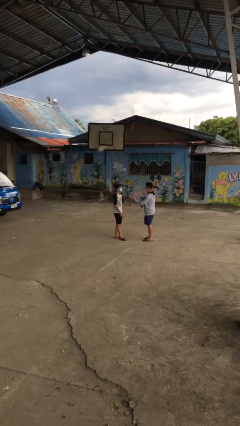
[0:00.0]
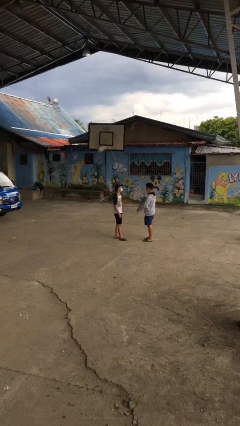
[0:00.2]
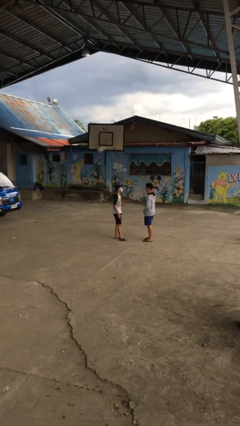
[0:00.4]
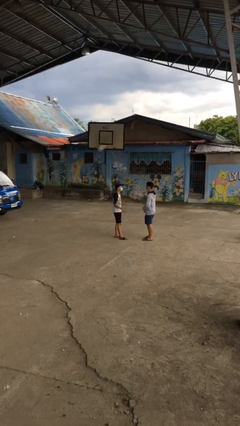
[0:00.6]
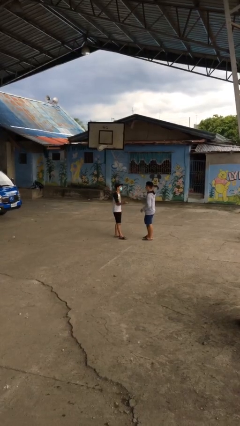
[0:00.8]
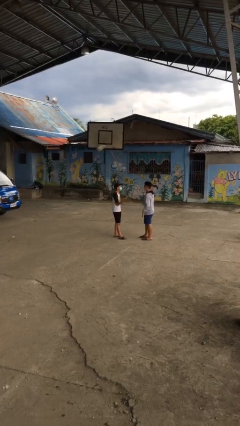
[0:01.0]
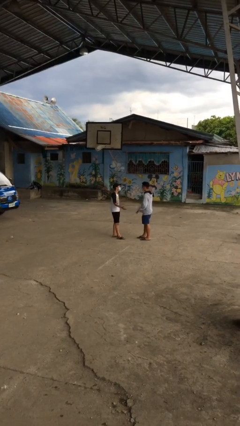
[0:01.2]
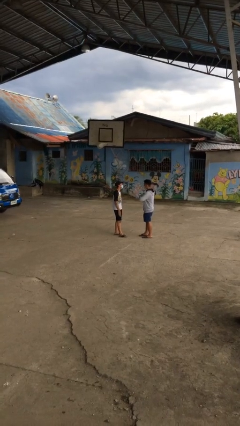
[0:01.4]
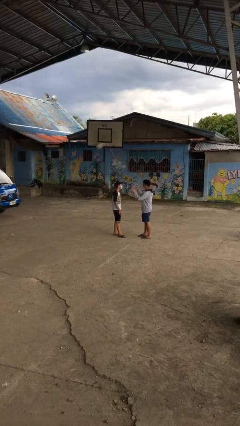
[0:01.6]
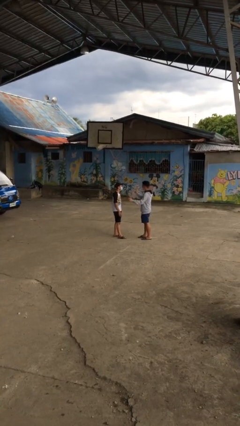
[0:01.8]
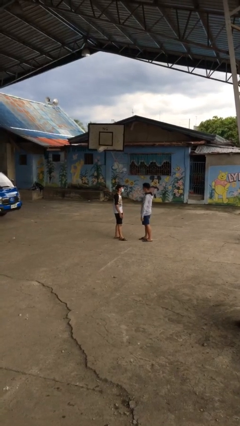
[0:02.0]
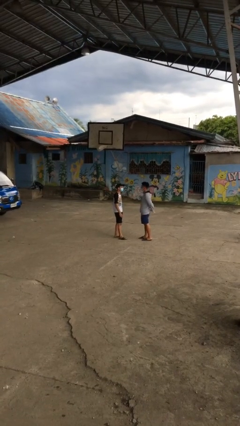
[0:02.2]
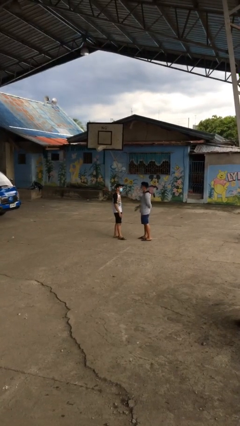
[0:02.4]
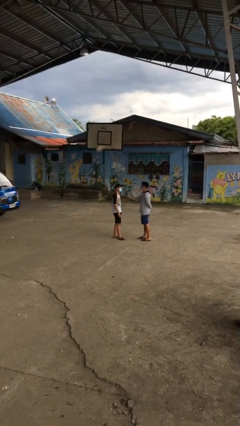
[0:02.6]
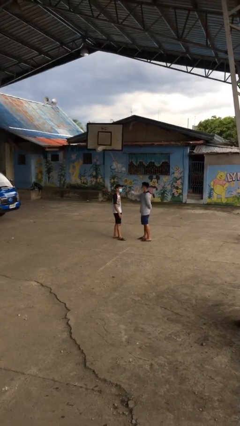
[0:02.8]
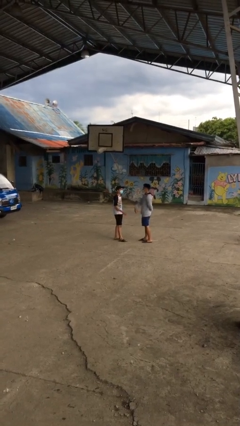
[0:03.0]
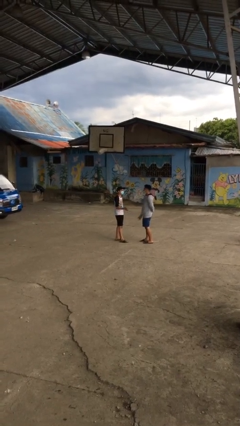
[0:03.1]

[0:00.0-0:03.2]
person talks to person

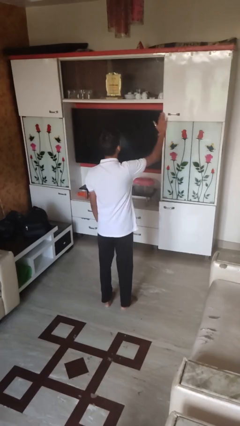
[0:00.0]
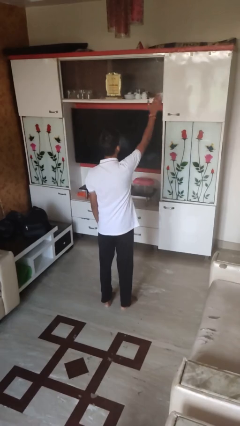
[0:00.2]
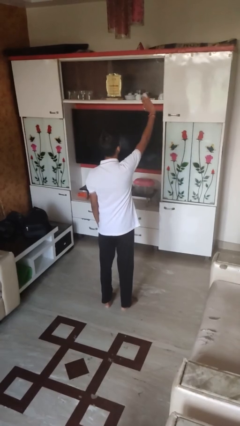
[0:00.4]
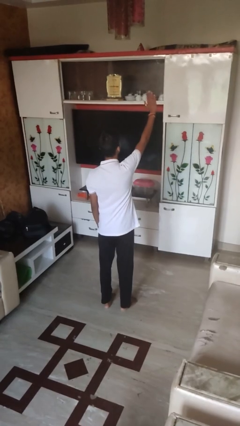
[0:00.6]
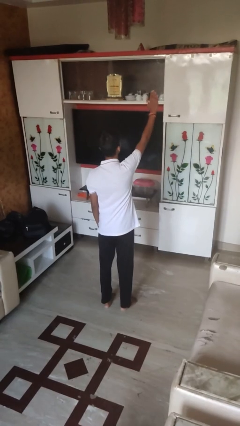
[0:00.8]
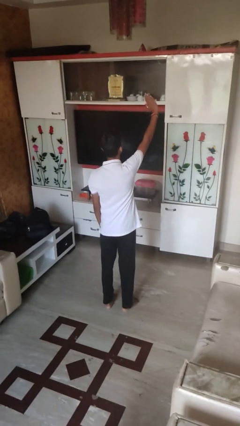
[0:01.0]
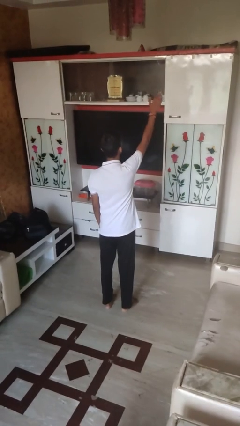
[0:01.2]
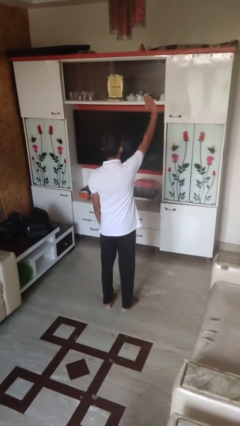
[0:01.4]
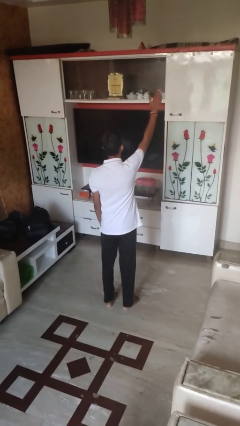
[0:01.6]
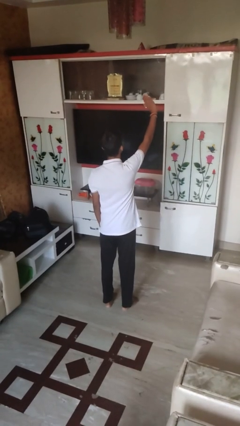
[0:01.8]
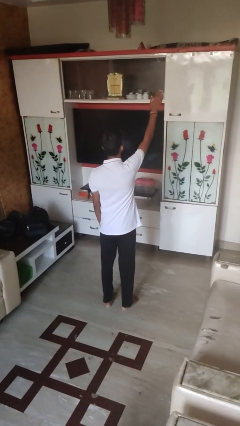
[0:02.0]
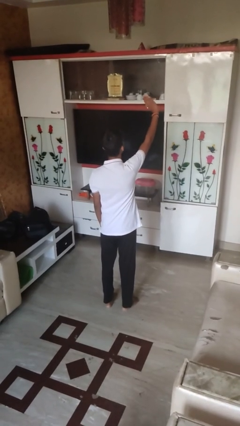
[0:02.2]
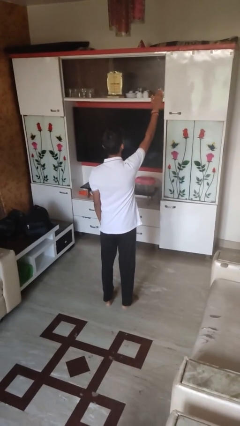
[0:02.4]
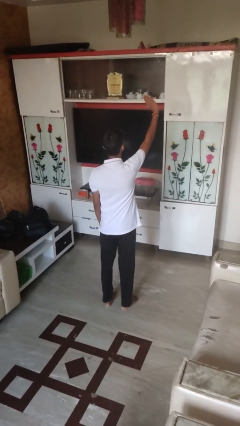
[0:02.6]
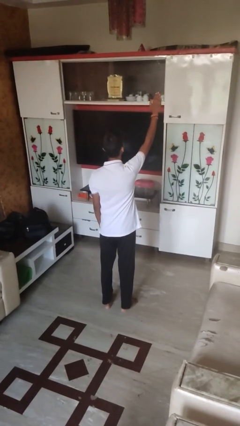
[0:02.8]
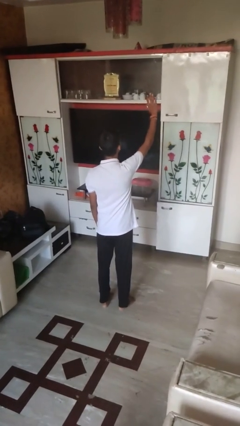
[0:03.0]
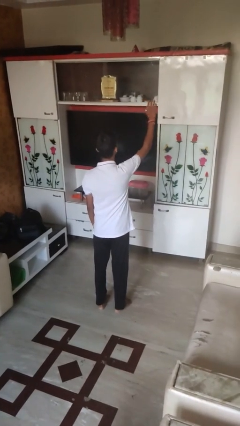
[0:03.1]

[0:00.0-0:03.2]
person waves at person

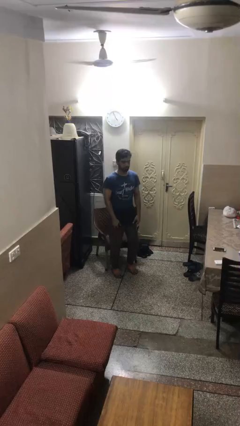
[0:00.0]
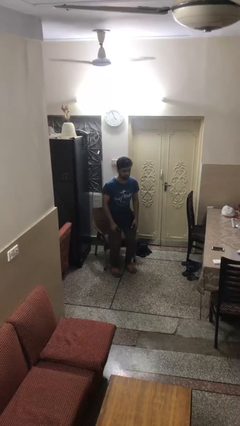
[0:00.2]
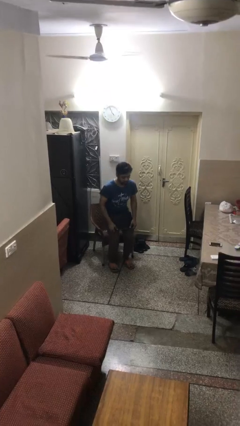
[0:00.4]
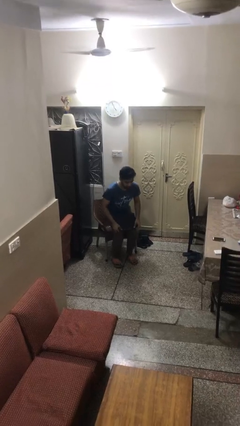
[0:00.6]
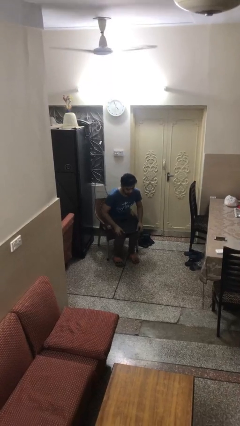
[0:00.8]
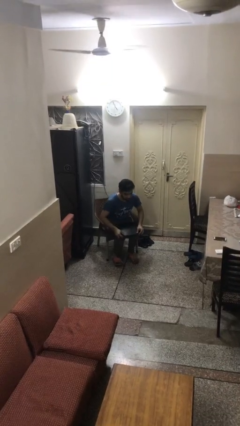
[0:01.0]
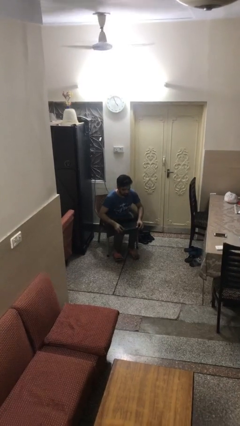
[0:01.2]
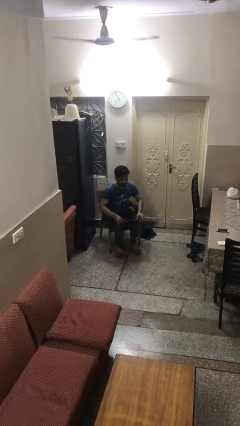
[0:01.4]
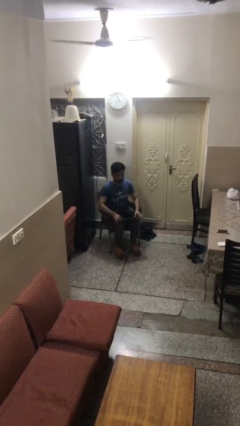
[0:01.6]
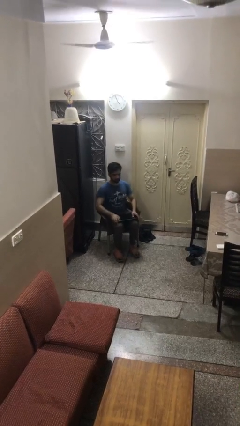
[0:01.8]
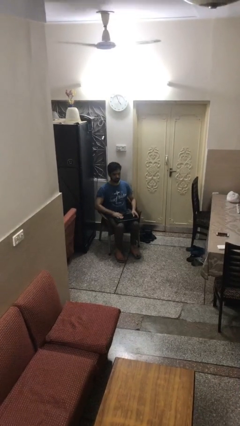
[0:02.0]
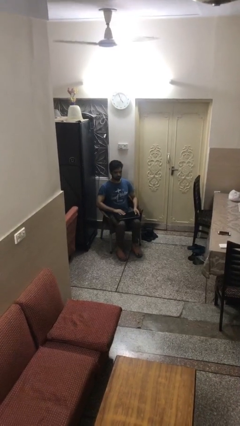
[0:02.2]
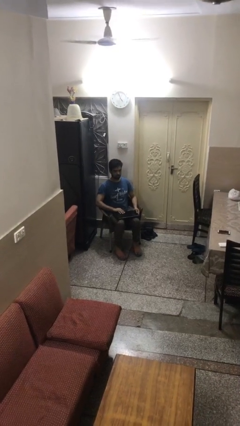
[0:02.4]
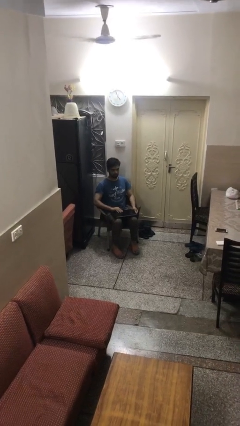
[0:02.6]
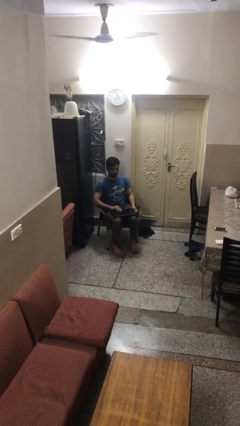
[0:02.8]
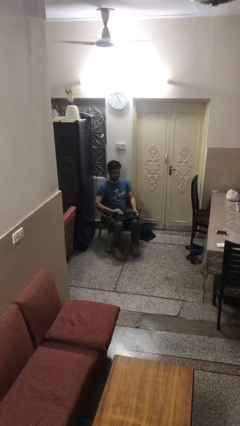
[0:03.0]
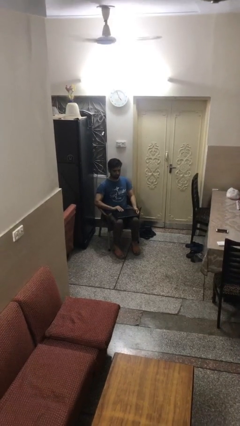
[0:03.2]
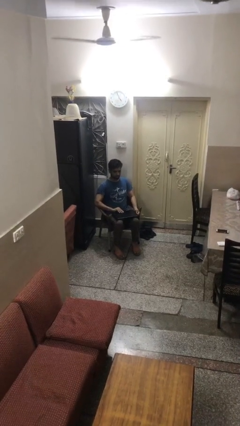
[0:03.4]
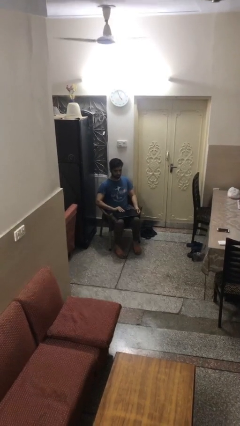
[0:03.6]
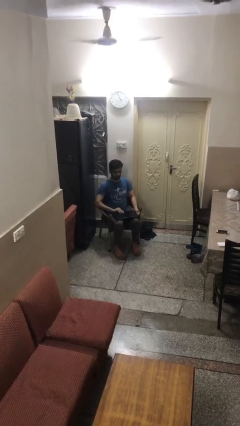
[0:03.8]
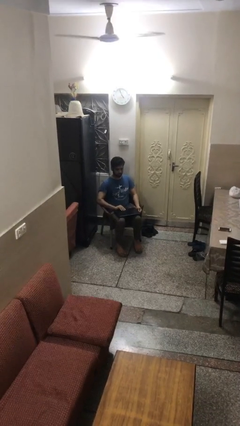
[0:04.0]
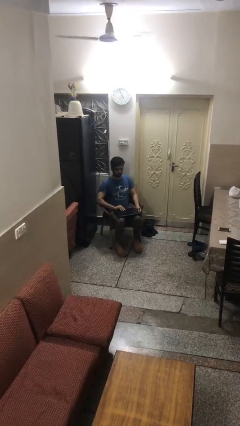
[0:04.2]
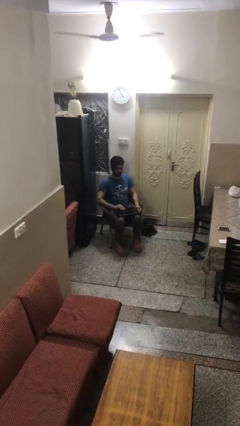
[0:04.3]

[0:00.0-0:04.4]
person sits down

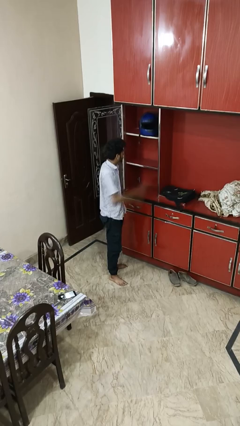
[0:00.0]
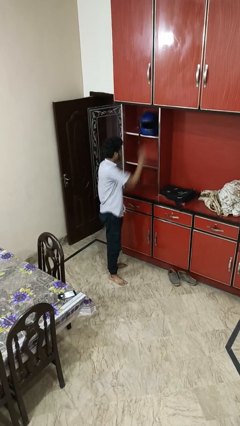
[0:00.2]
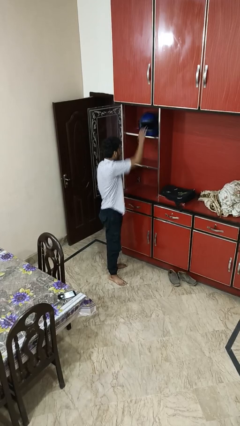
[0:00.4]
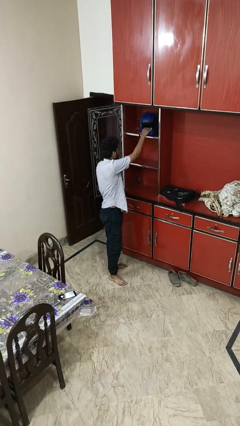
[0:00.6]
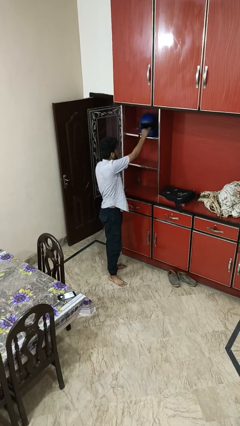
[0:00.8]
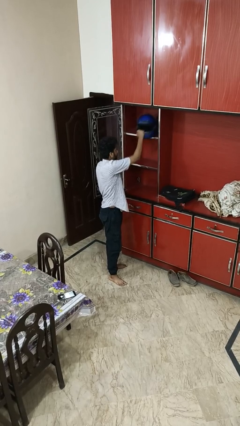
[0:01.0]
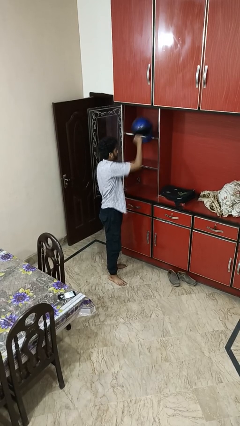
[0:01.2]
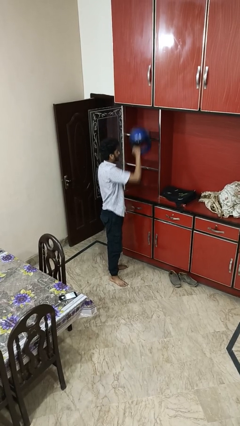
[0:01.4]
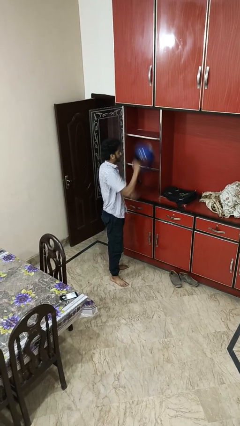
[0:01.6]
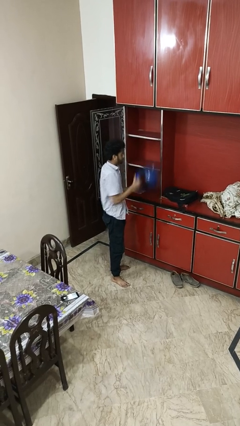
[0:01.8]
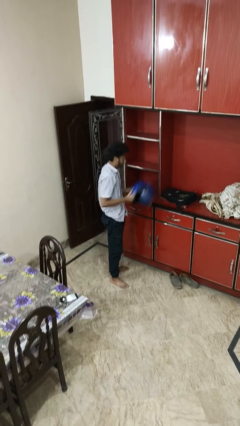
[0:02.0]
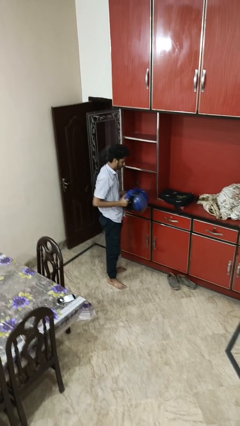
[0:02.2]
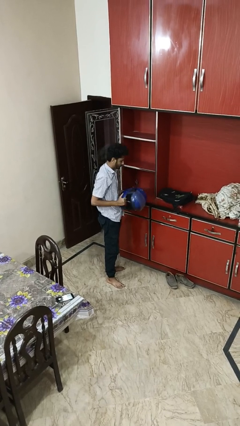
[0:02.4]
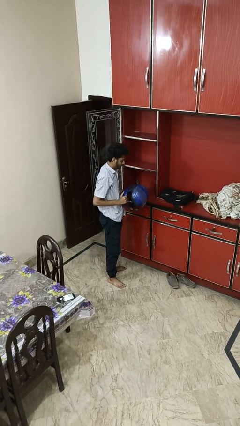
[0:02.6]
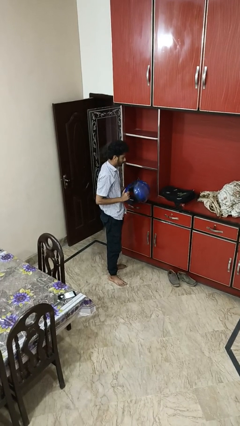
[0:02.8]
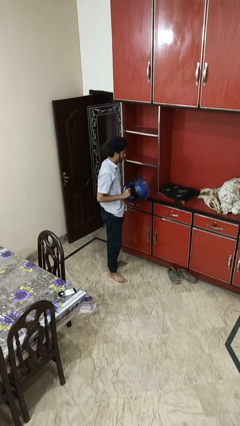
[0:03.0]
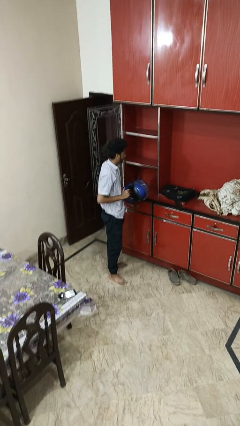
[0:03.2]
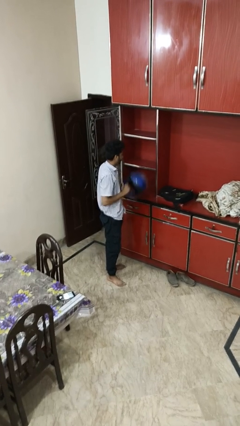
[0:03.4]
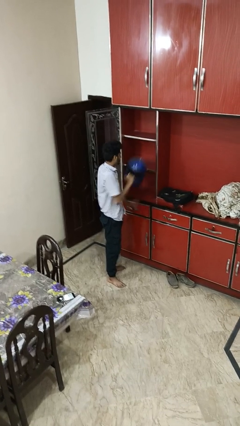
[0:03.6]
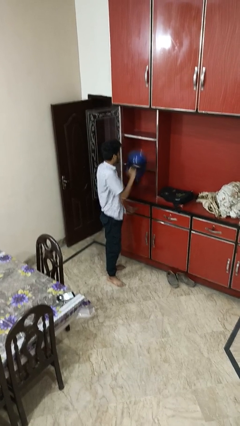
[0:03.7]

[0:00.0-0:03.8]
person picks up object from shelf

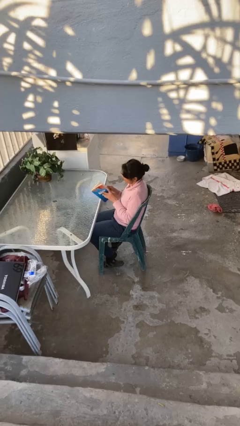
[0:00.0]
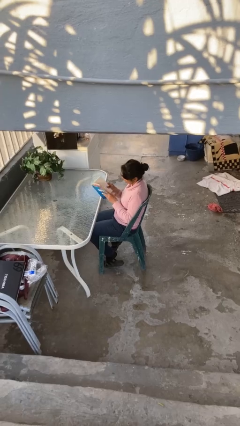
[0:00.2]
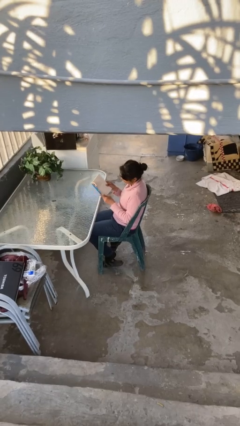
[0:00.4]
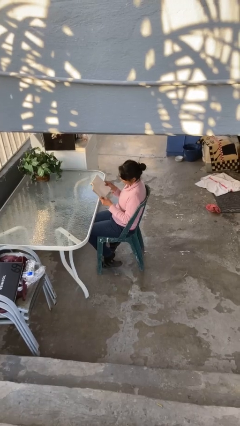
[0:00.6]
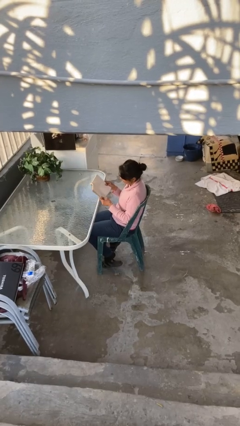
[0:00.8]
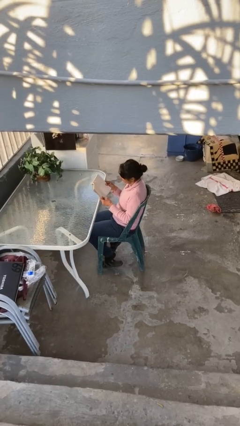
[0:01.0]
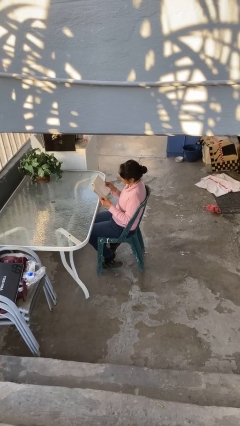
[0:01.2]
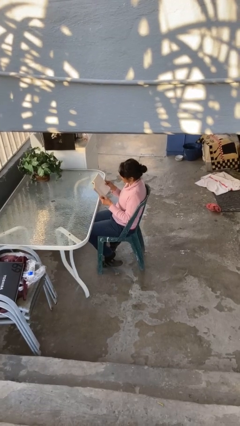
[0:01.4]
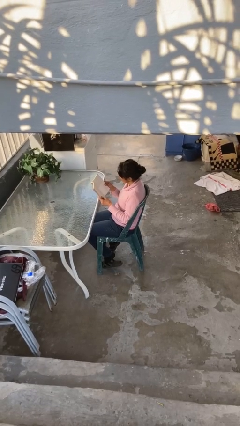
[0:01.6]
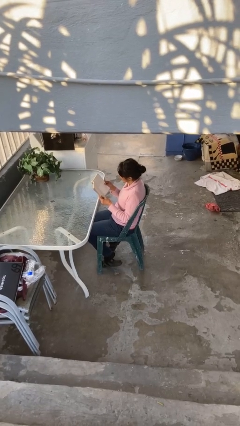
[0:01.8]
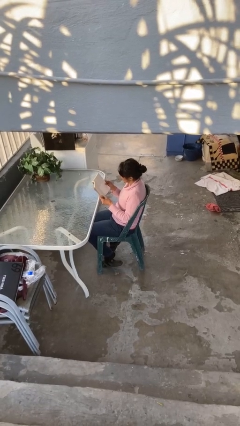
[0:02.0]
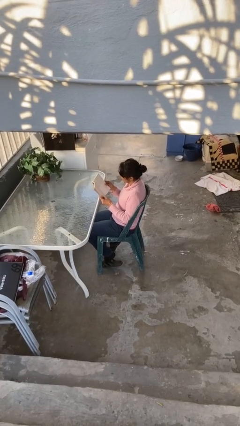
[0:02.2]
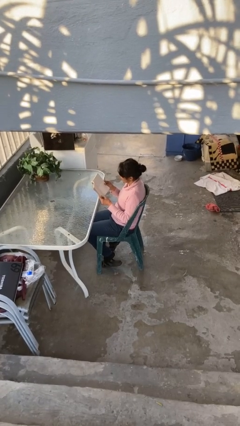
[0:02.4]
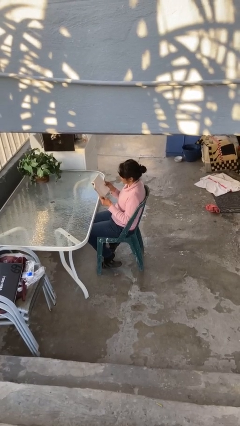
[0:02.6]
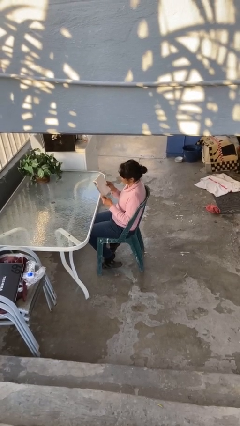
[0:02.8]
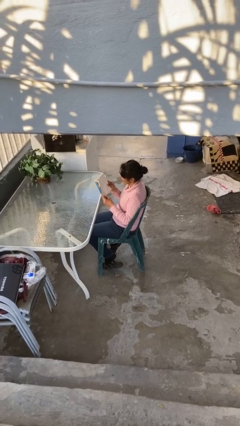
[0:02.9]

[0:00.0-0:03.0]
person reads document

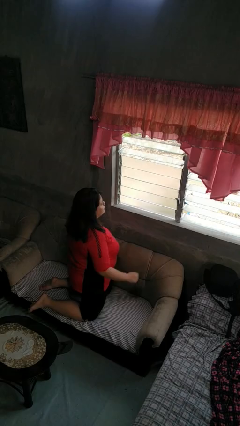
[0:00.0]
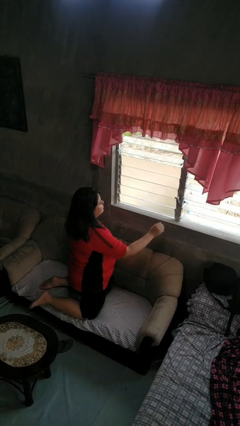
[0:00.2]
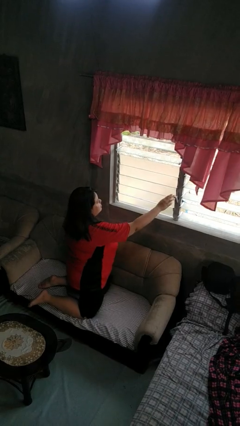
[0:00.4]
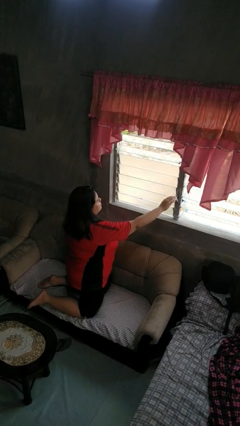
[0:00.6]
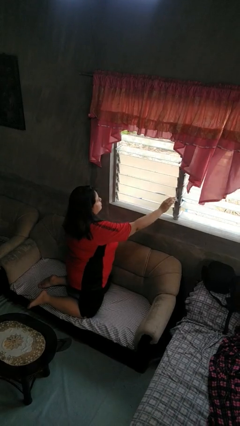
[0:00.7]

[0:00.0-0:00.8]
person opens home window
